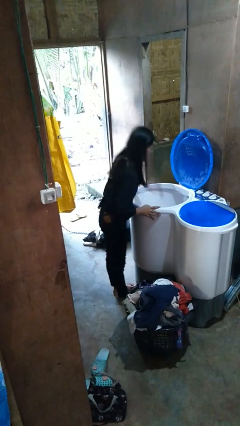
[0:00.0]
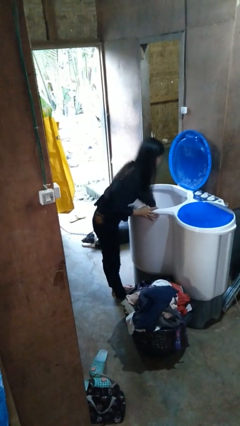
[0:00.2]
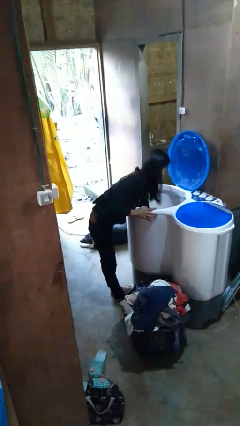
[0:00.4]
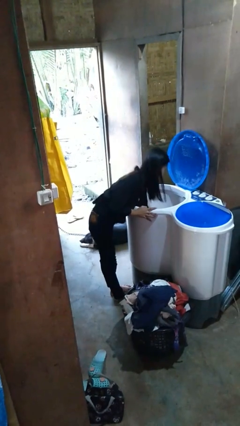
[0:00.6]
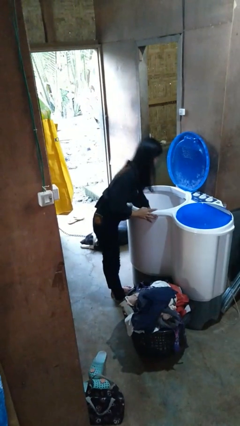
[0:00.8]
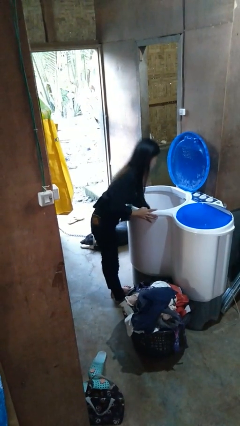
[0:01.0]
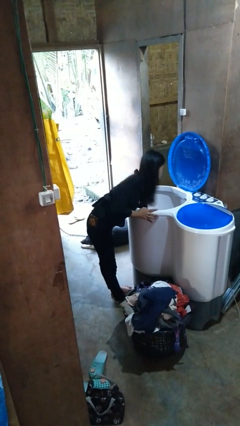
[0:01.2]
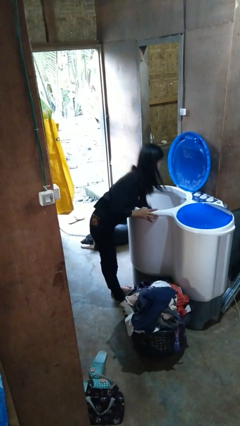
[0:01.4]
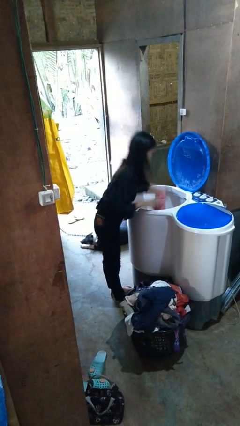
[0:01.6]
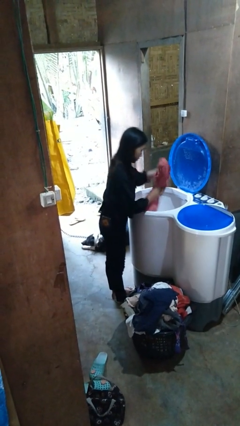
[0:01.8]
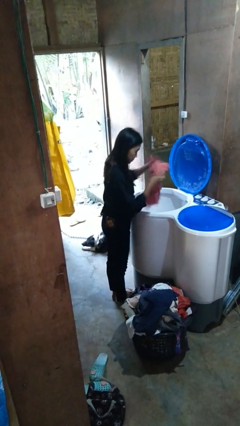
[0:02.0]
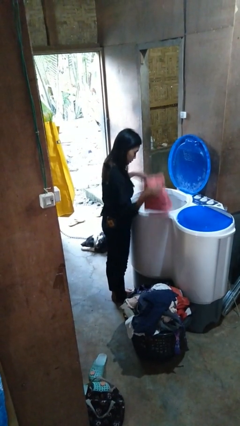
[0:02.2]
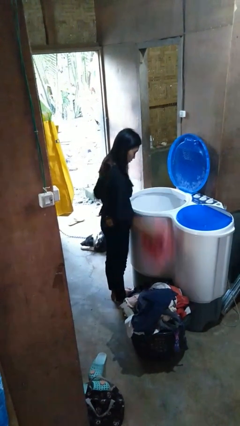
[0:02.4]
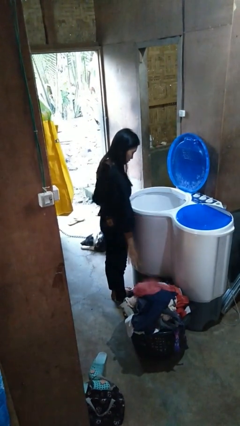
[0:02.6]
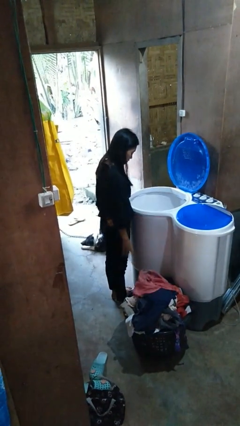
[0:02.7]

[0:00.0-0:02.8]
person unloads clotheswasher

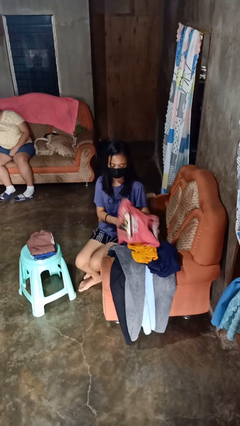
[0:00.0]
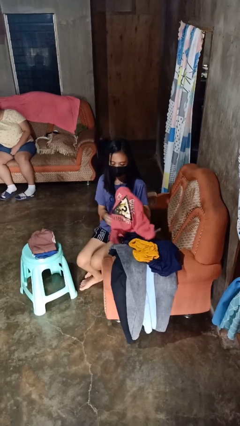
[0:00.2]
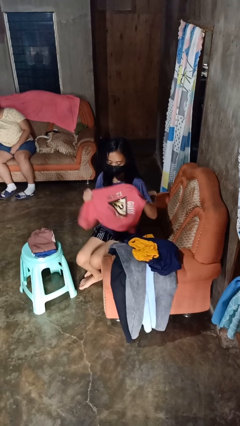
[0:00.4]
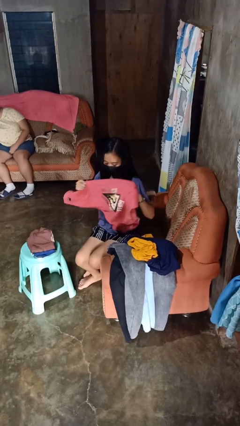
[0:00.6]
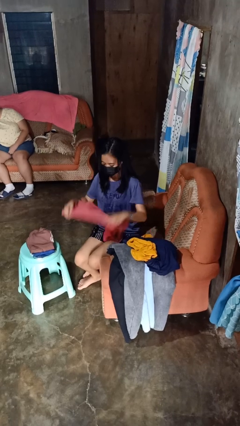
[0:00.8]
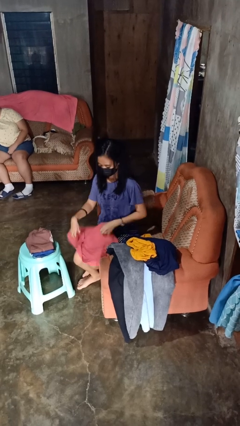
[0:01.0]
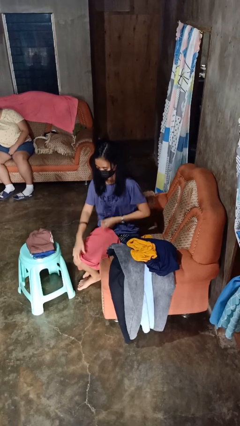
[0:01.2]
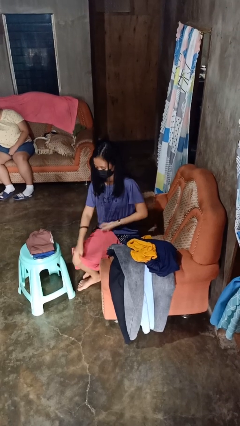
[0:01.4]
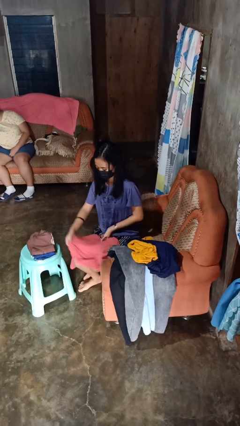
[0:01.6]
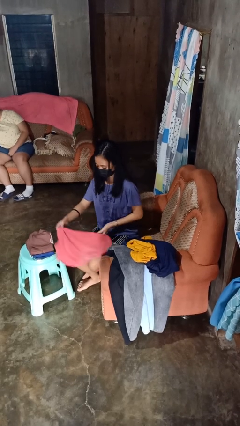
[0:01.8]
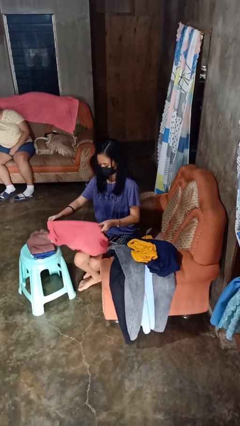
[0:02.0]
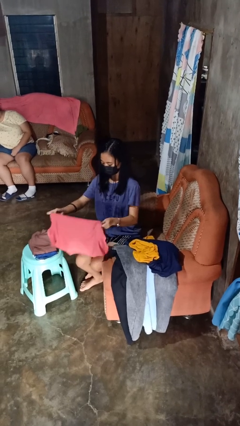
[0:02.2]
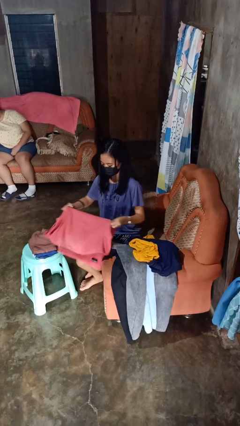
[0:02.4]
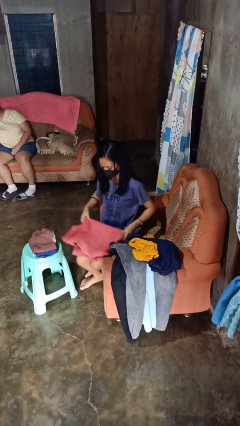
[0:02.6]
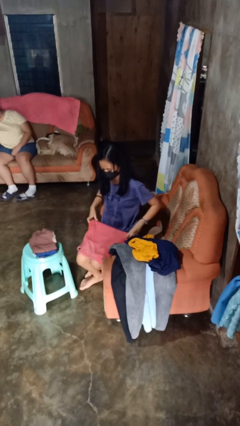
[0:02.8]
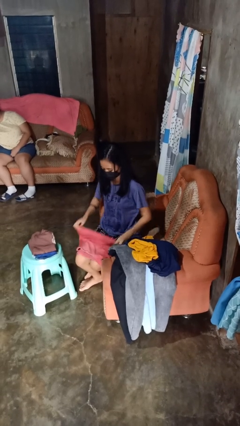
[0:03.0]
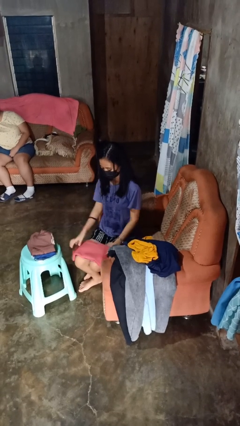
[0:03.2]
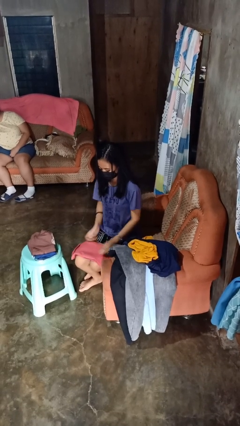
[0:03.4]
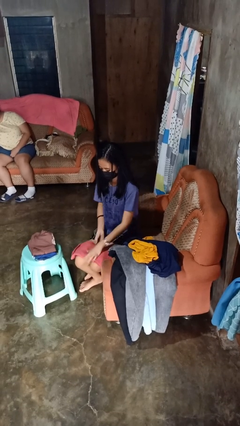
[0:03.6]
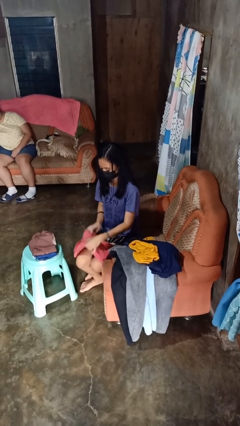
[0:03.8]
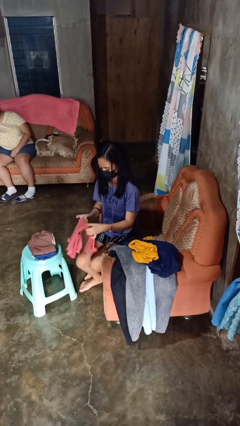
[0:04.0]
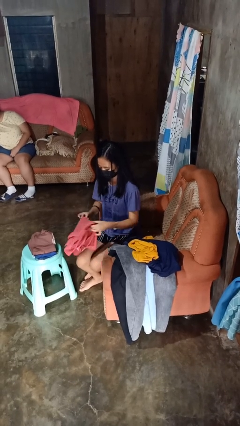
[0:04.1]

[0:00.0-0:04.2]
person folds shirt

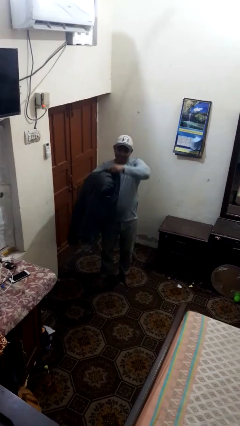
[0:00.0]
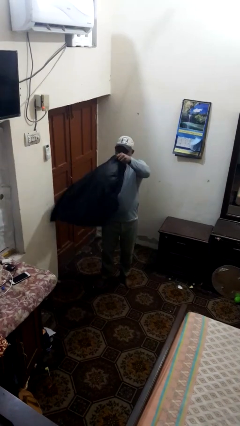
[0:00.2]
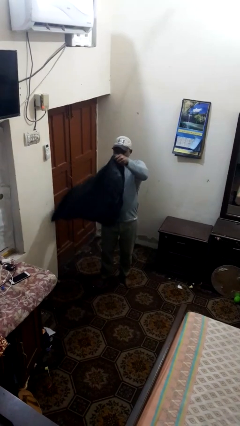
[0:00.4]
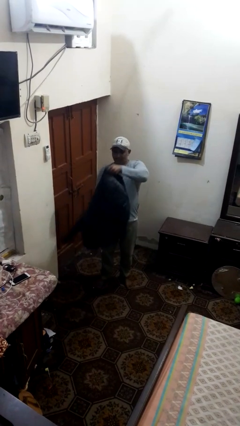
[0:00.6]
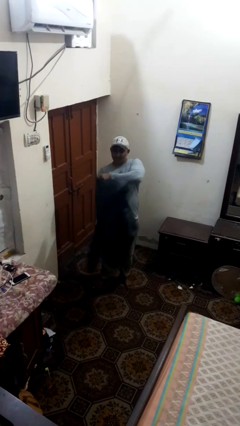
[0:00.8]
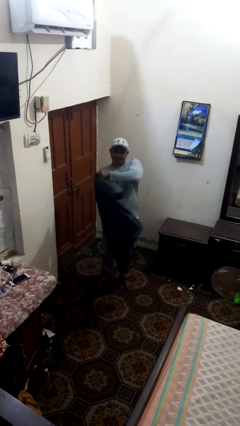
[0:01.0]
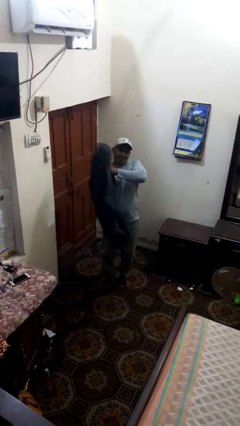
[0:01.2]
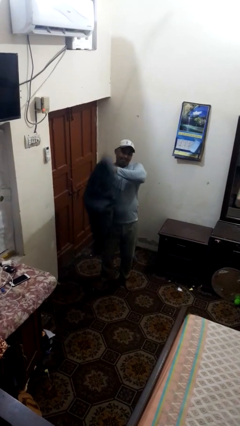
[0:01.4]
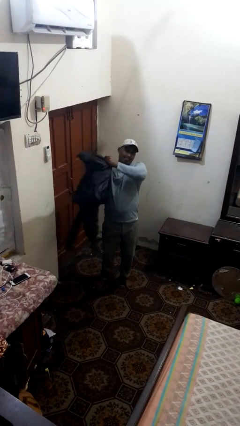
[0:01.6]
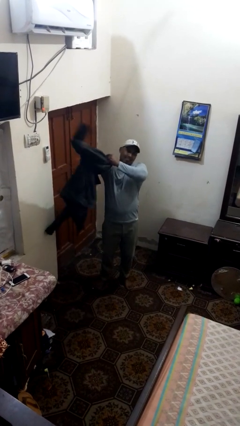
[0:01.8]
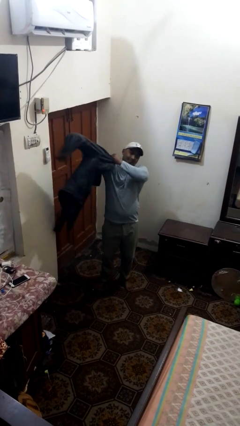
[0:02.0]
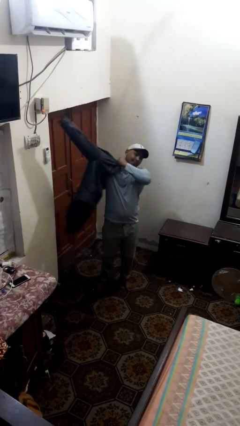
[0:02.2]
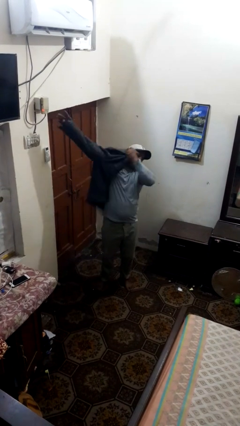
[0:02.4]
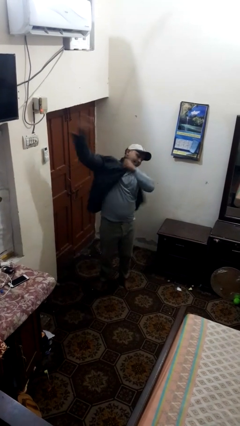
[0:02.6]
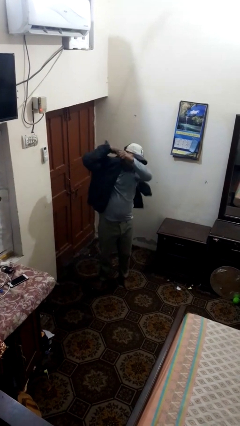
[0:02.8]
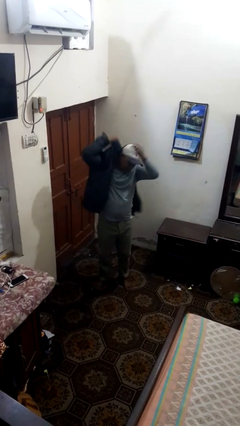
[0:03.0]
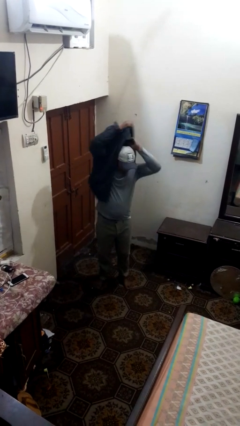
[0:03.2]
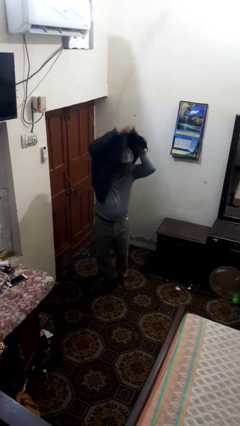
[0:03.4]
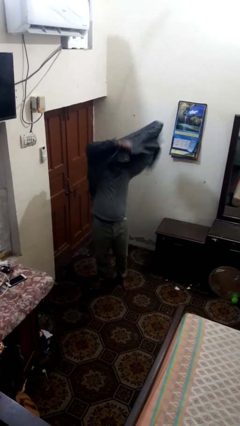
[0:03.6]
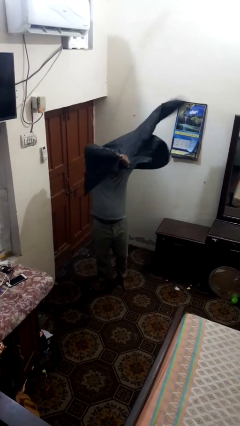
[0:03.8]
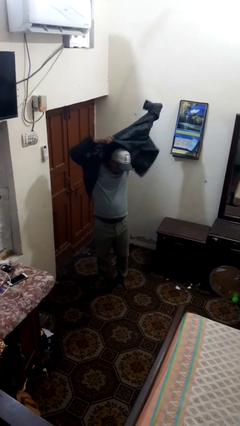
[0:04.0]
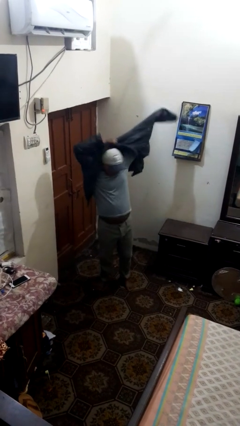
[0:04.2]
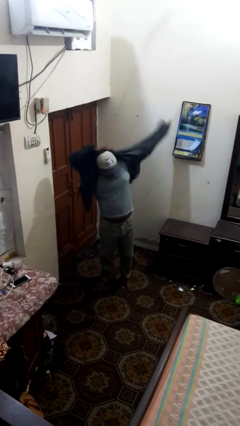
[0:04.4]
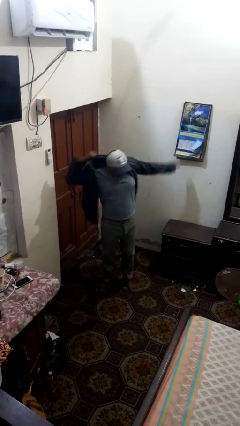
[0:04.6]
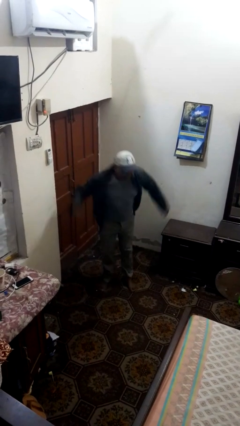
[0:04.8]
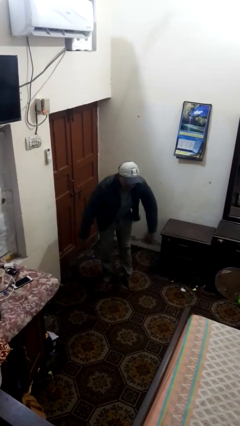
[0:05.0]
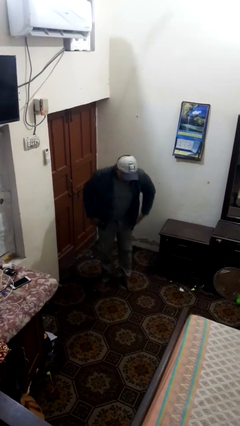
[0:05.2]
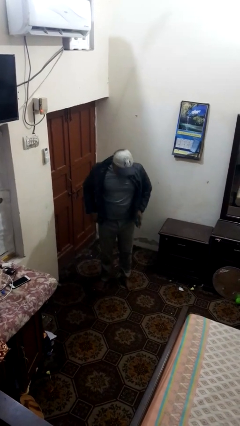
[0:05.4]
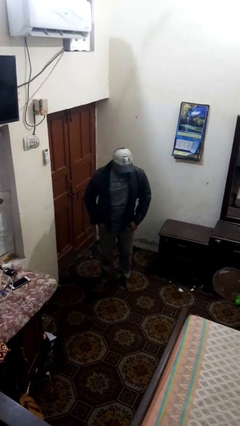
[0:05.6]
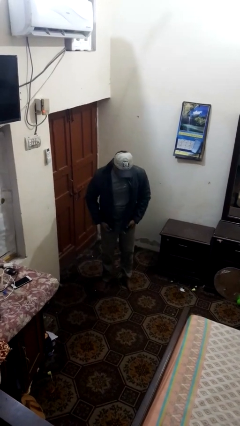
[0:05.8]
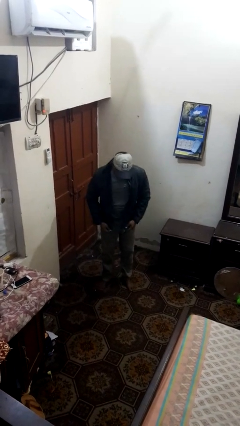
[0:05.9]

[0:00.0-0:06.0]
person puts on jacket

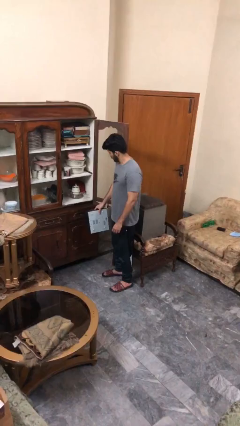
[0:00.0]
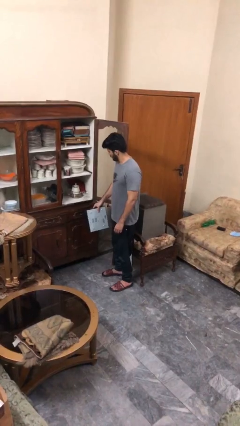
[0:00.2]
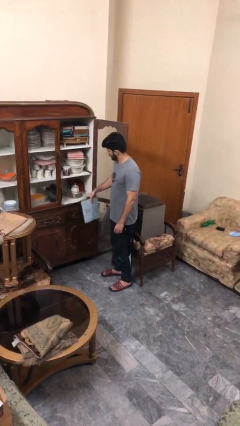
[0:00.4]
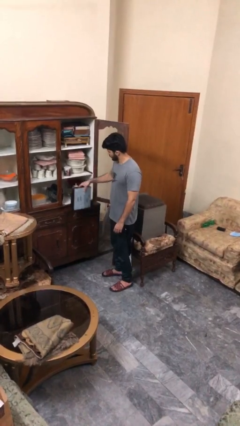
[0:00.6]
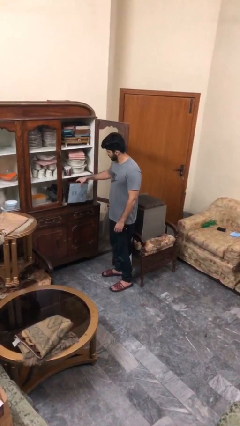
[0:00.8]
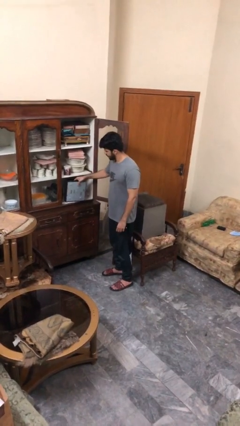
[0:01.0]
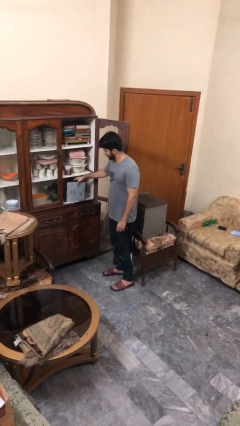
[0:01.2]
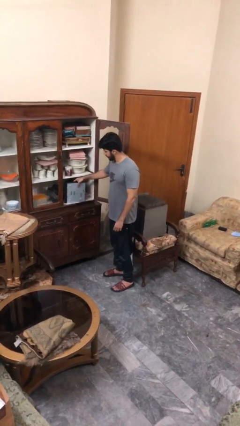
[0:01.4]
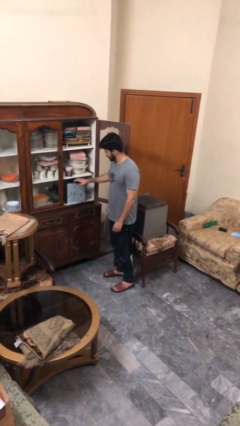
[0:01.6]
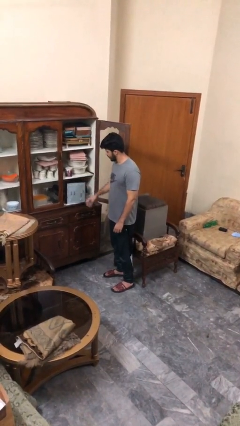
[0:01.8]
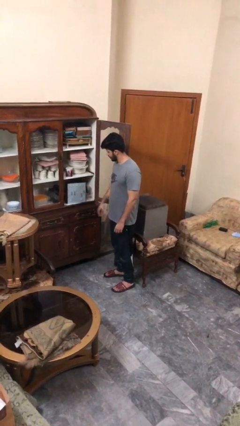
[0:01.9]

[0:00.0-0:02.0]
person puts down object on countertop

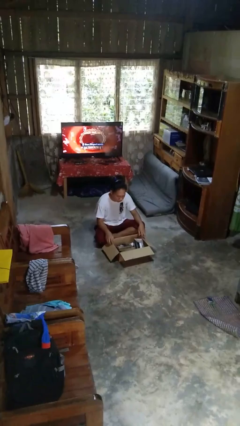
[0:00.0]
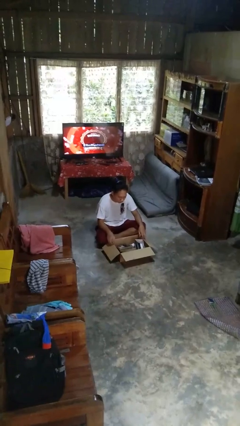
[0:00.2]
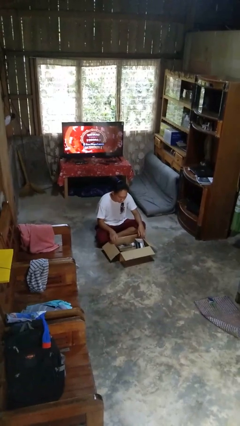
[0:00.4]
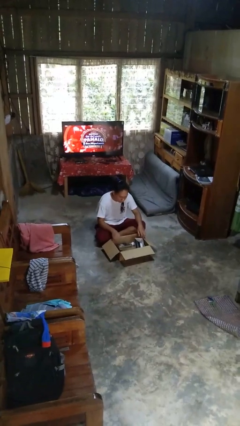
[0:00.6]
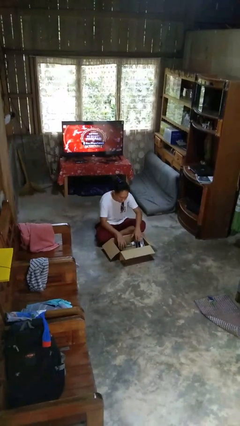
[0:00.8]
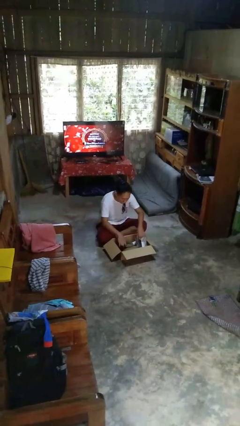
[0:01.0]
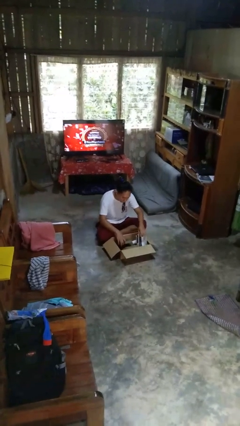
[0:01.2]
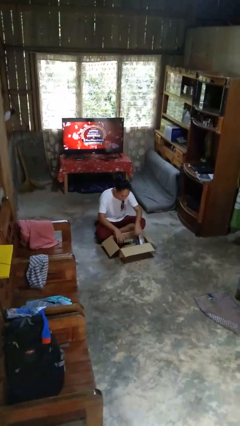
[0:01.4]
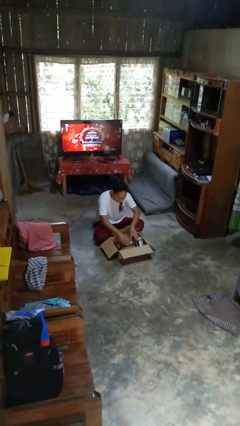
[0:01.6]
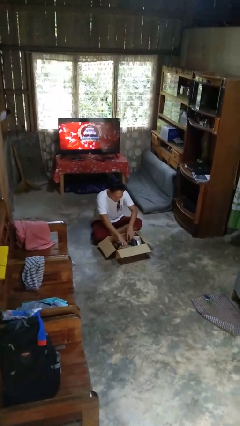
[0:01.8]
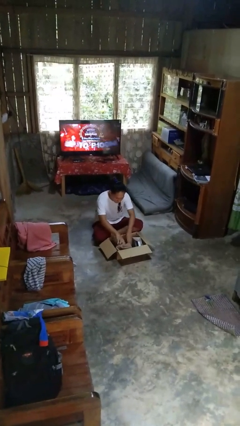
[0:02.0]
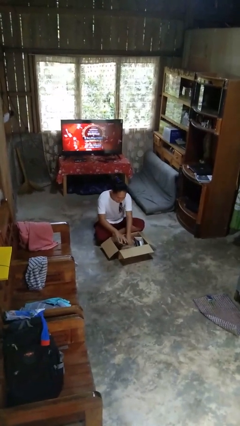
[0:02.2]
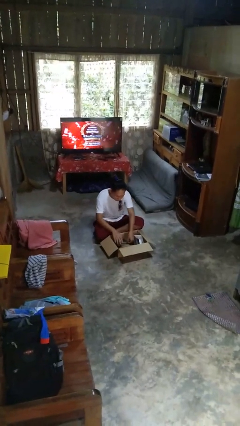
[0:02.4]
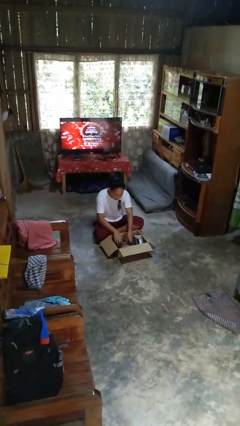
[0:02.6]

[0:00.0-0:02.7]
person searches in box
